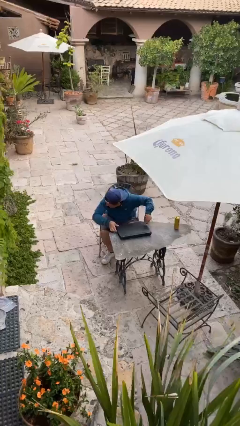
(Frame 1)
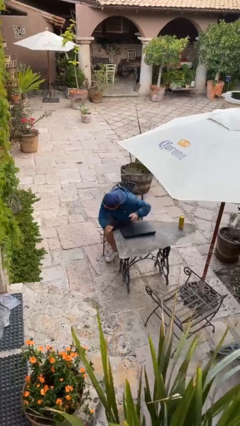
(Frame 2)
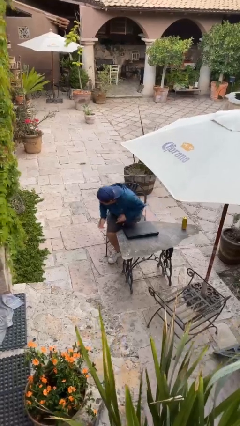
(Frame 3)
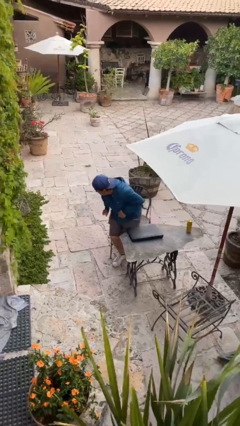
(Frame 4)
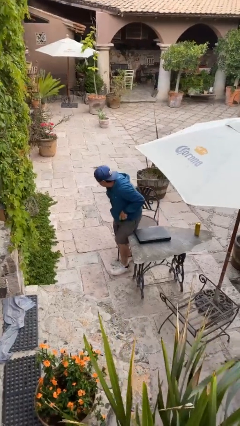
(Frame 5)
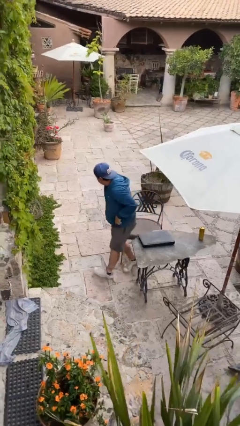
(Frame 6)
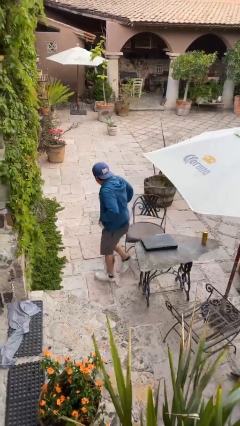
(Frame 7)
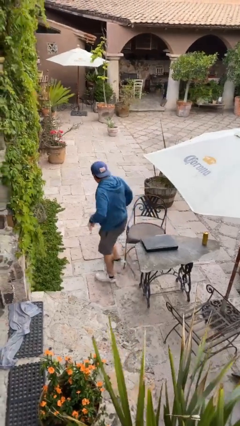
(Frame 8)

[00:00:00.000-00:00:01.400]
person stands up

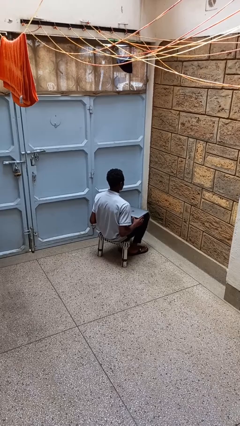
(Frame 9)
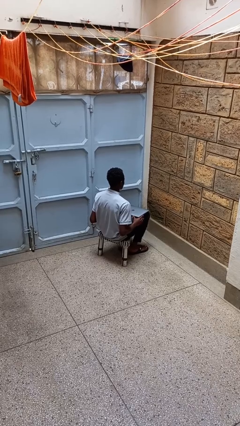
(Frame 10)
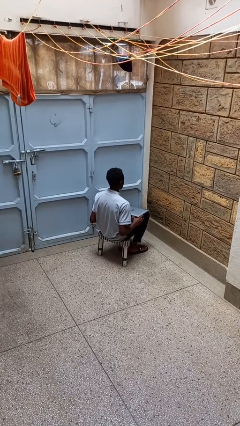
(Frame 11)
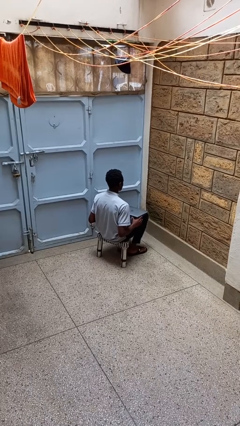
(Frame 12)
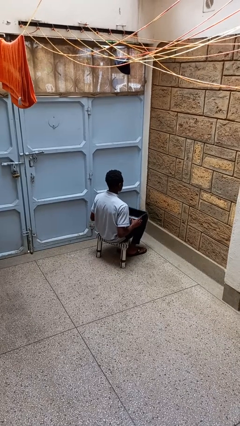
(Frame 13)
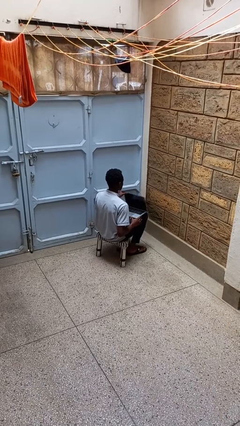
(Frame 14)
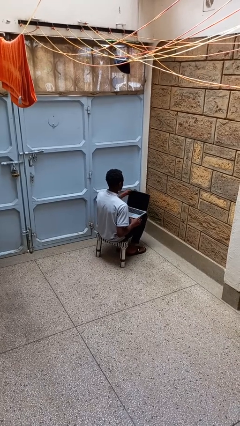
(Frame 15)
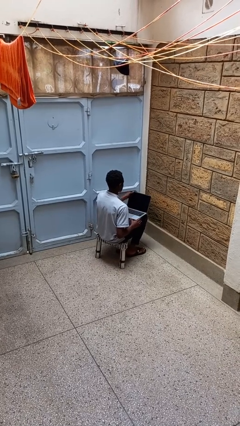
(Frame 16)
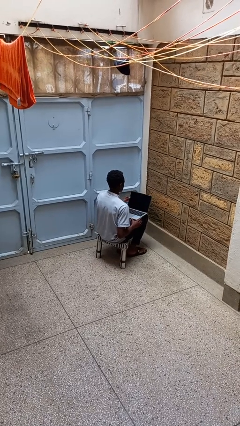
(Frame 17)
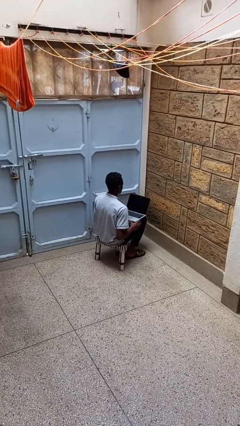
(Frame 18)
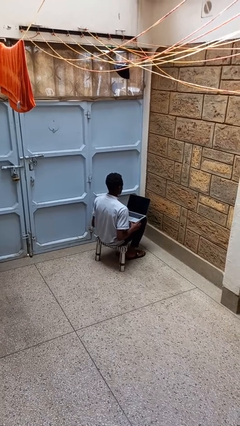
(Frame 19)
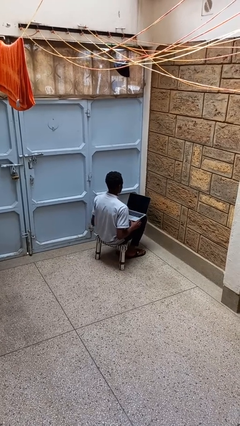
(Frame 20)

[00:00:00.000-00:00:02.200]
person opens laptop

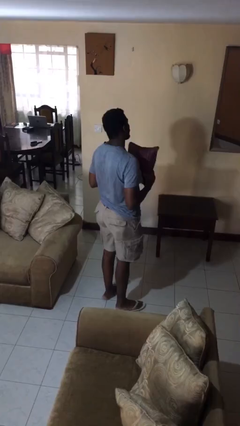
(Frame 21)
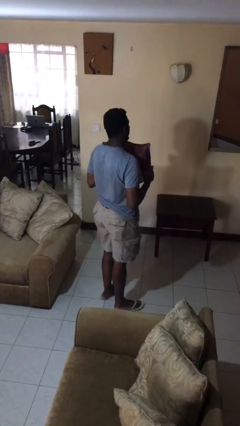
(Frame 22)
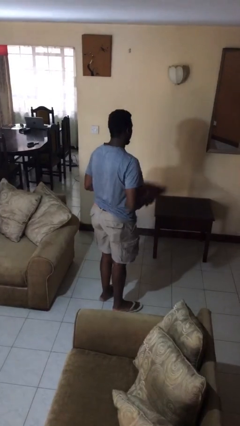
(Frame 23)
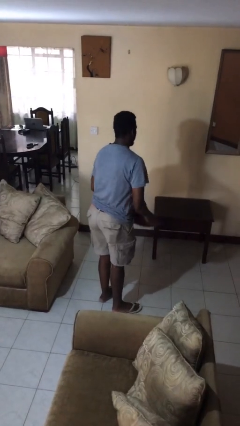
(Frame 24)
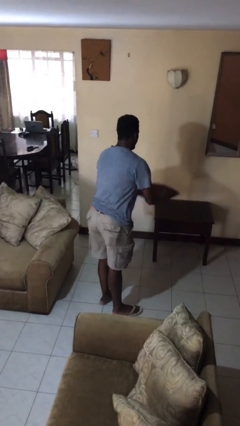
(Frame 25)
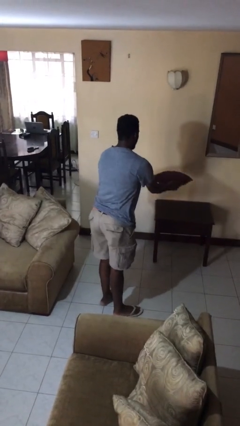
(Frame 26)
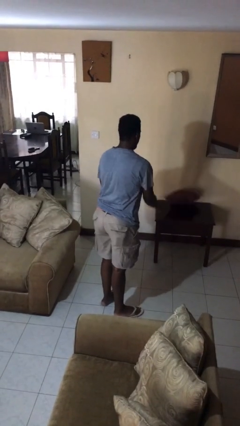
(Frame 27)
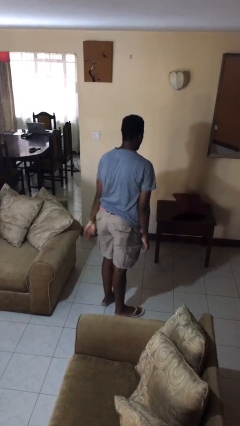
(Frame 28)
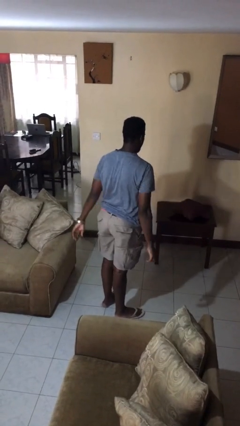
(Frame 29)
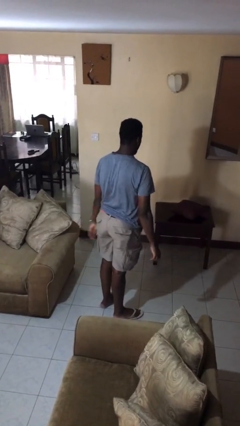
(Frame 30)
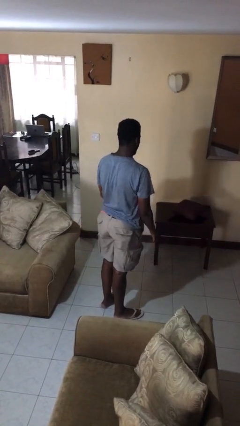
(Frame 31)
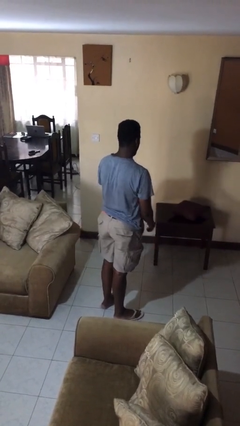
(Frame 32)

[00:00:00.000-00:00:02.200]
person throws object on table

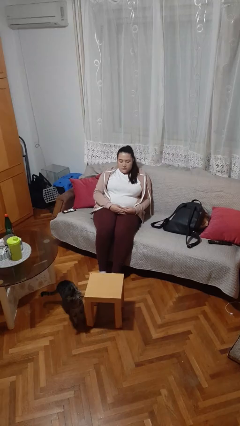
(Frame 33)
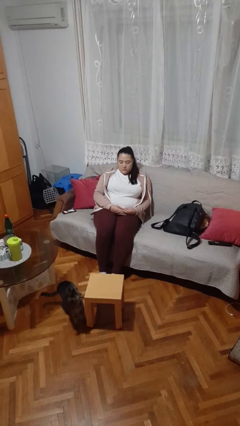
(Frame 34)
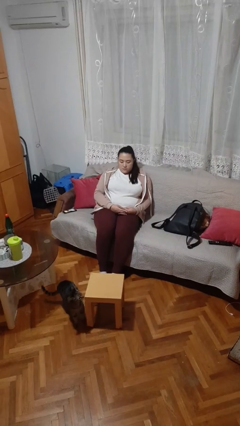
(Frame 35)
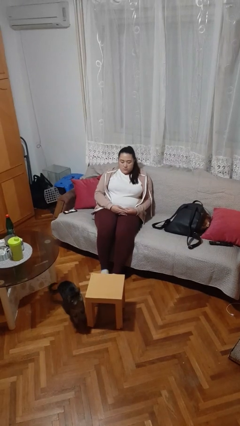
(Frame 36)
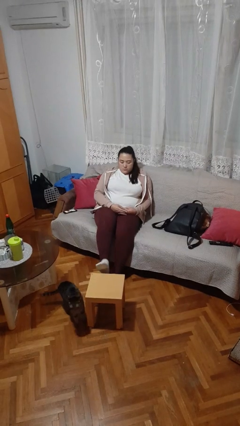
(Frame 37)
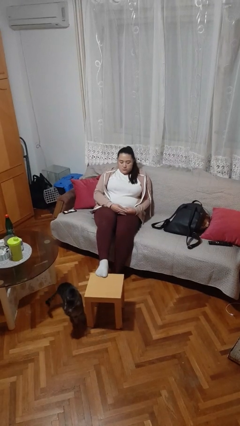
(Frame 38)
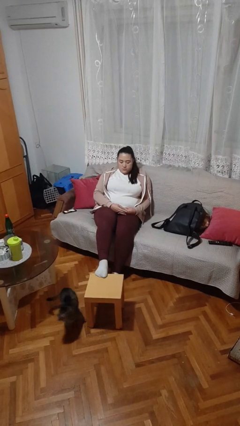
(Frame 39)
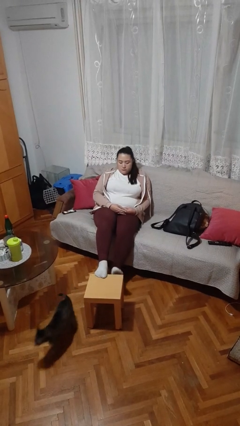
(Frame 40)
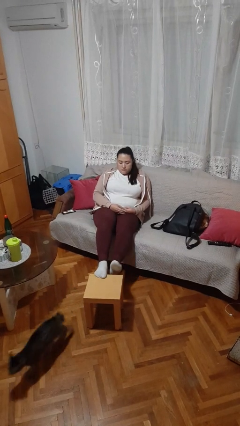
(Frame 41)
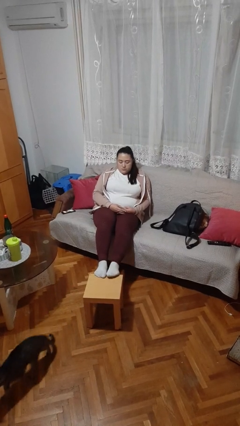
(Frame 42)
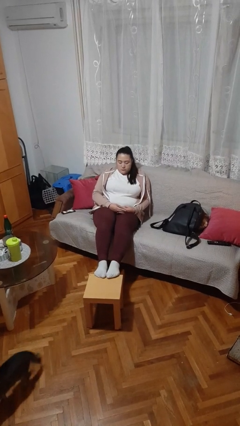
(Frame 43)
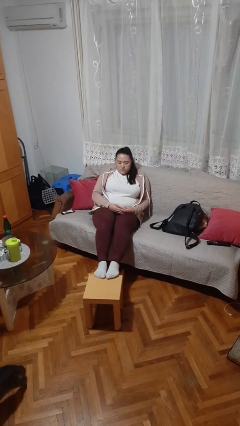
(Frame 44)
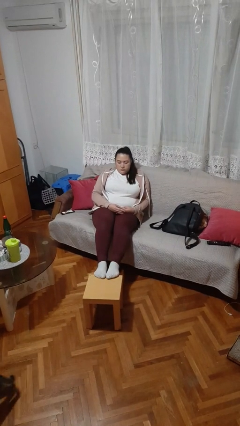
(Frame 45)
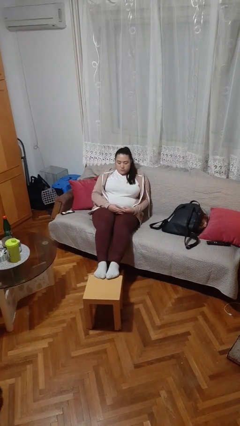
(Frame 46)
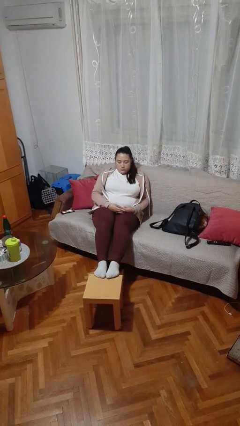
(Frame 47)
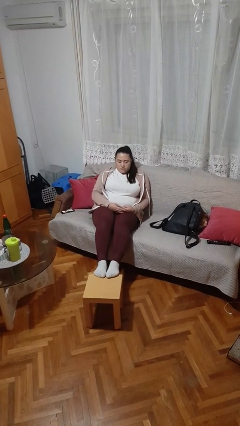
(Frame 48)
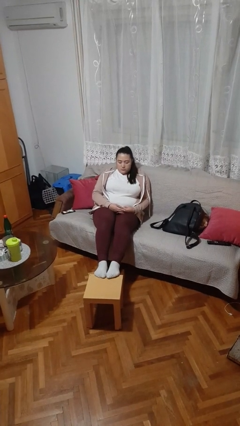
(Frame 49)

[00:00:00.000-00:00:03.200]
person puts feet up

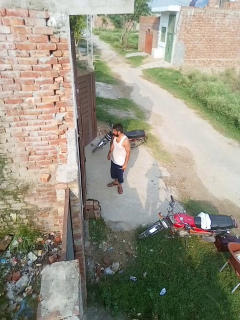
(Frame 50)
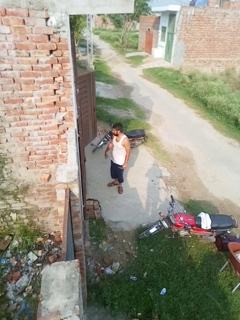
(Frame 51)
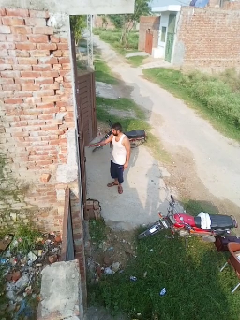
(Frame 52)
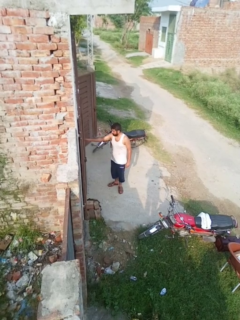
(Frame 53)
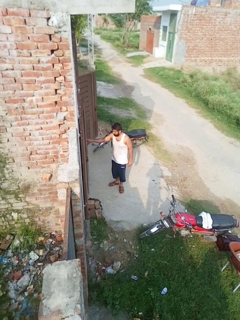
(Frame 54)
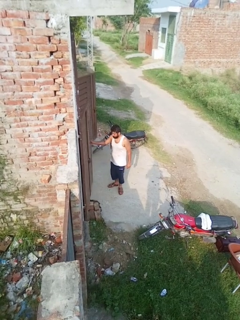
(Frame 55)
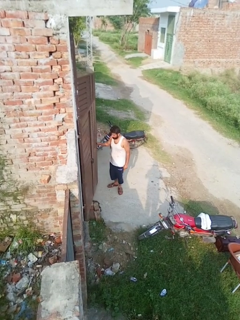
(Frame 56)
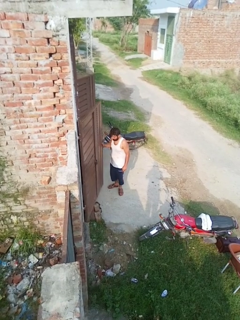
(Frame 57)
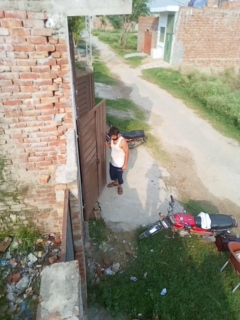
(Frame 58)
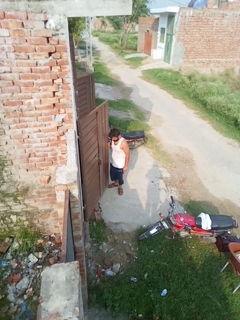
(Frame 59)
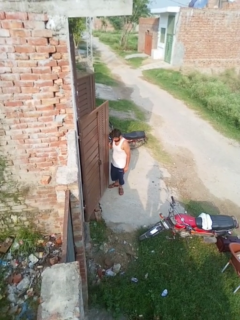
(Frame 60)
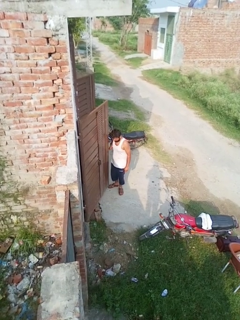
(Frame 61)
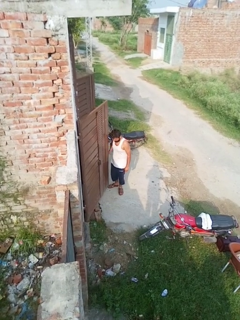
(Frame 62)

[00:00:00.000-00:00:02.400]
person opens facility door

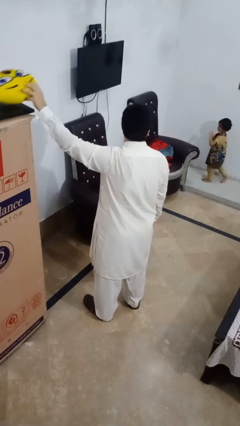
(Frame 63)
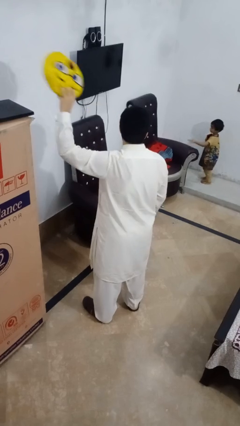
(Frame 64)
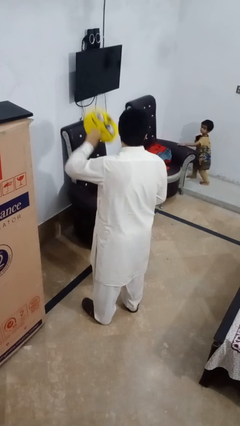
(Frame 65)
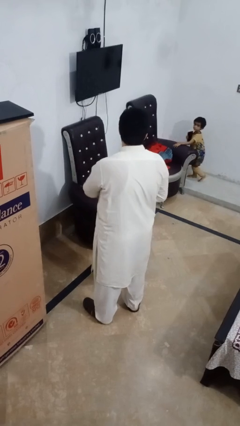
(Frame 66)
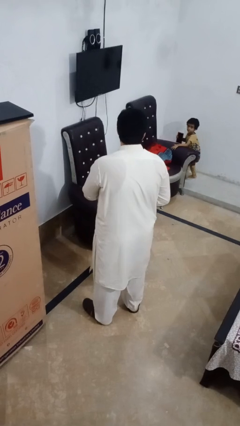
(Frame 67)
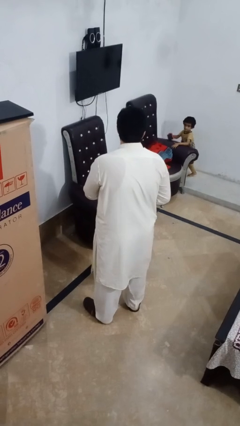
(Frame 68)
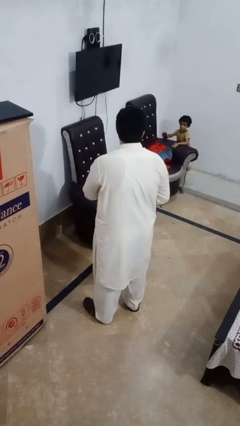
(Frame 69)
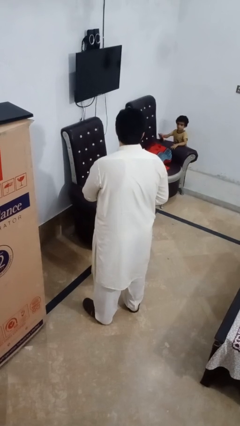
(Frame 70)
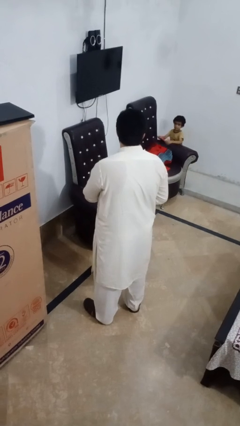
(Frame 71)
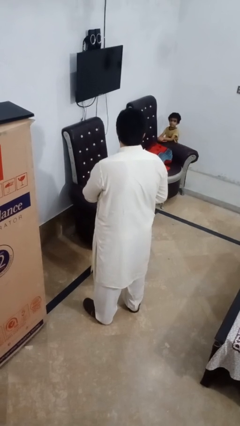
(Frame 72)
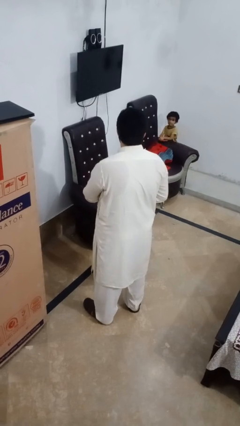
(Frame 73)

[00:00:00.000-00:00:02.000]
person picks up object from shelf

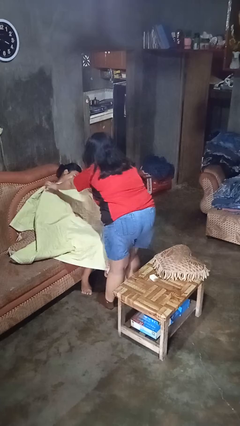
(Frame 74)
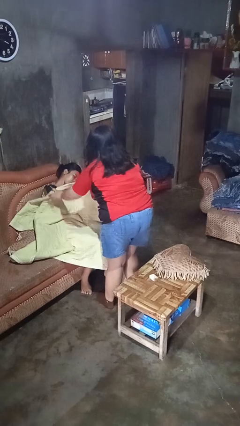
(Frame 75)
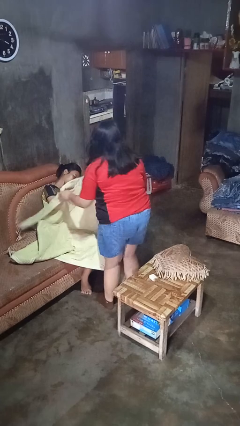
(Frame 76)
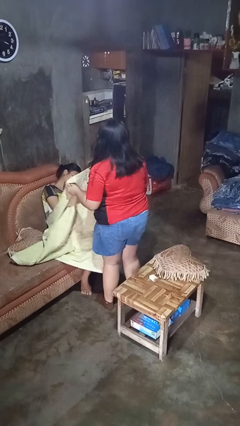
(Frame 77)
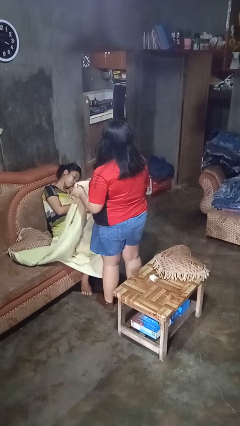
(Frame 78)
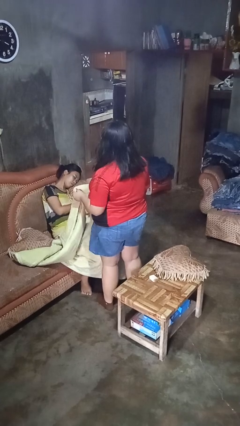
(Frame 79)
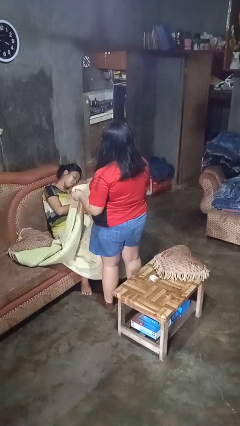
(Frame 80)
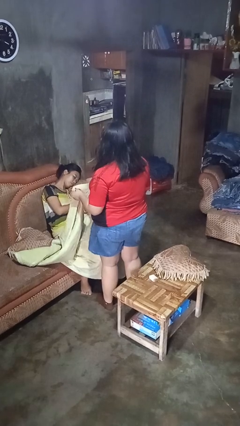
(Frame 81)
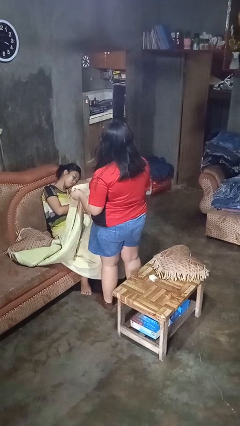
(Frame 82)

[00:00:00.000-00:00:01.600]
person uncovers friend with blanket

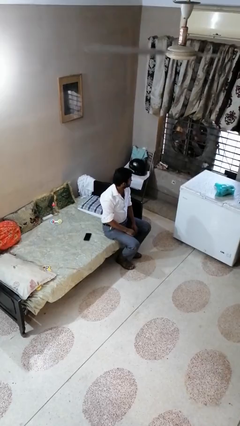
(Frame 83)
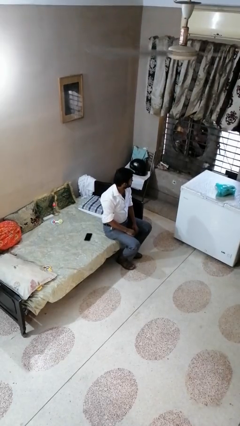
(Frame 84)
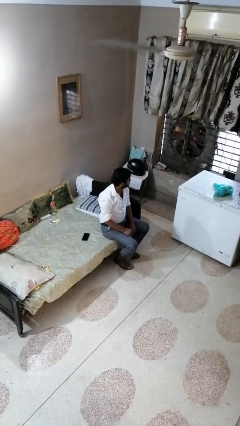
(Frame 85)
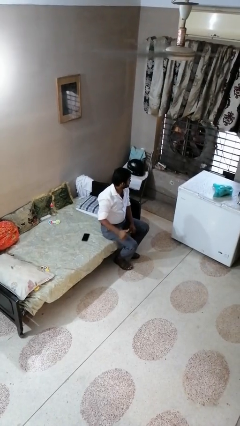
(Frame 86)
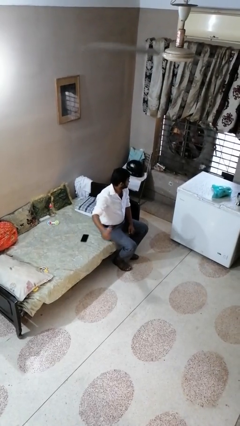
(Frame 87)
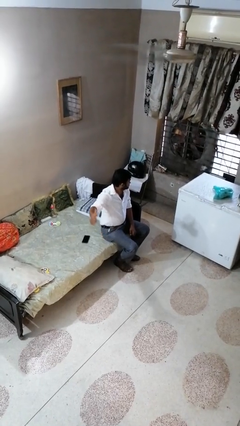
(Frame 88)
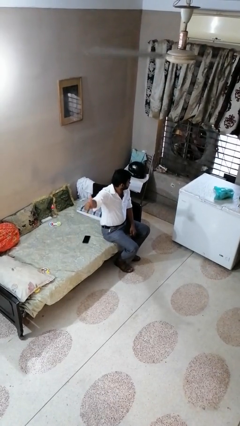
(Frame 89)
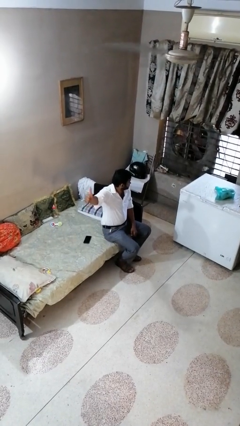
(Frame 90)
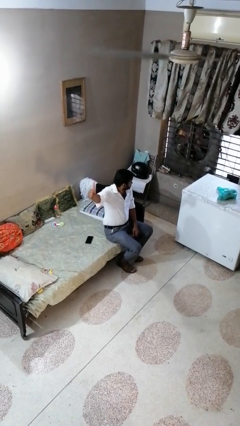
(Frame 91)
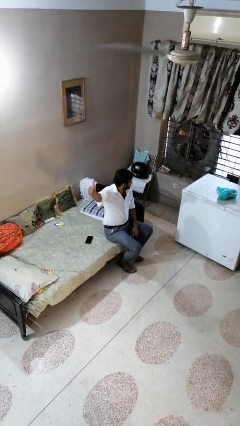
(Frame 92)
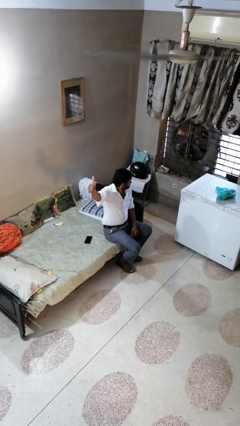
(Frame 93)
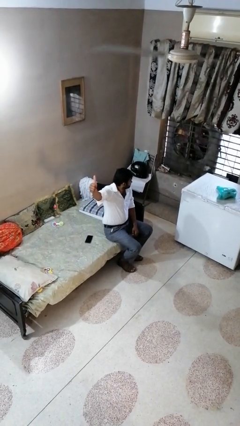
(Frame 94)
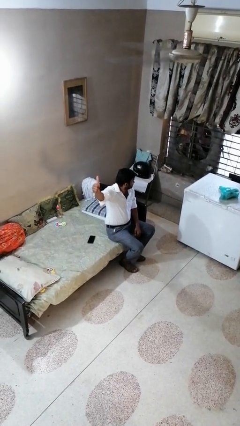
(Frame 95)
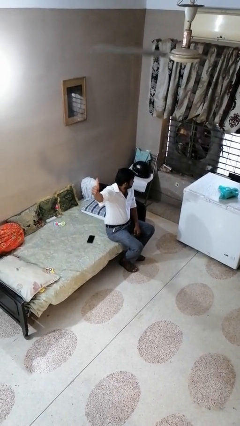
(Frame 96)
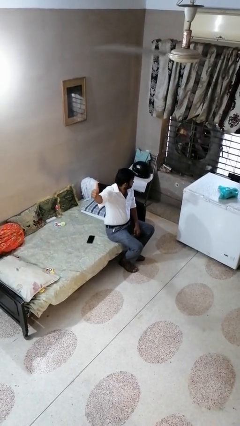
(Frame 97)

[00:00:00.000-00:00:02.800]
person gestures thumbs up
